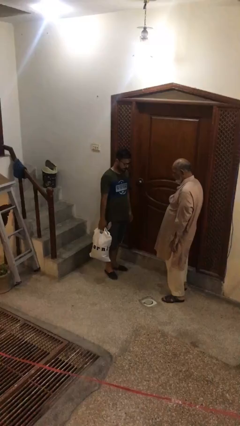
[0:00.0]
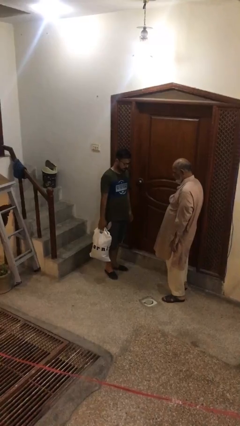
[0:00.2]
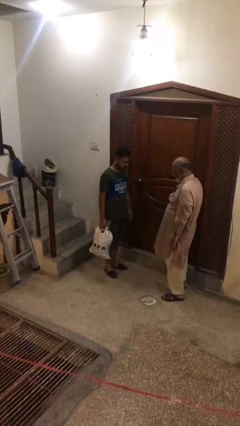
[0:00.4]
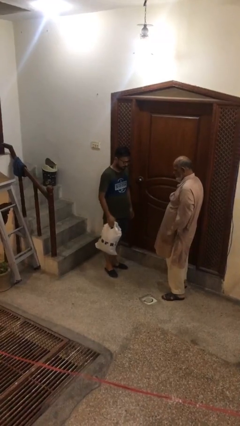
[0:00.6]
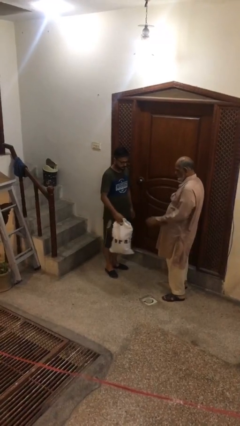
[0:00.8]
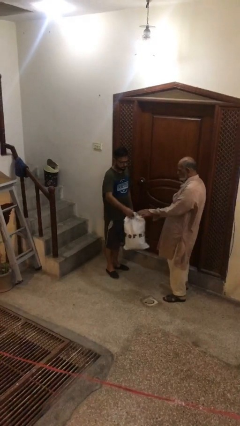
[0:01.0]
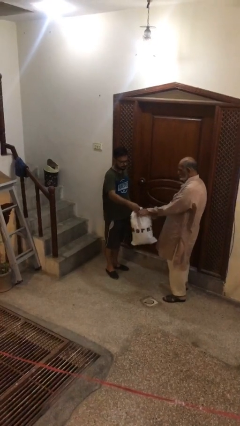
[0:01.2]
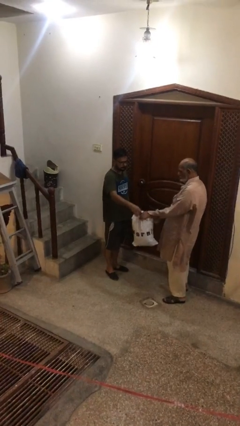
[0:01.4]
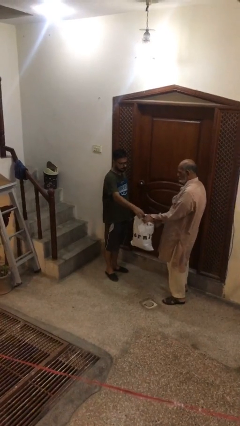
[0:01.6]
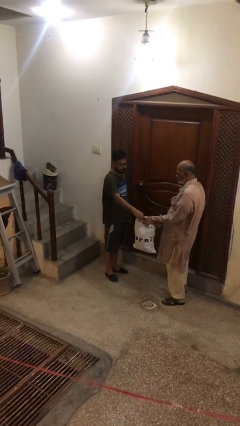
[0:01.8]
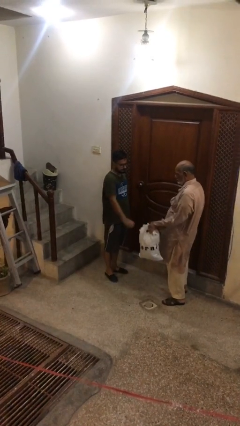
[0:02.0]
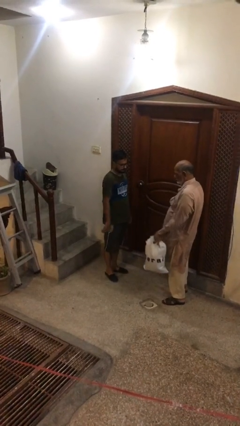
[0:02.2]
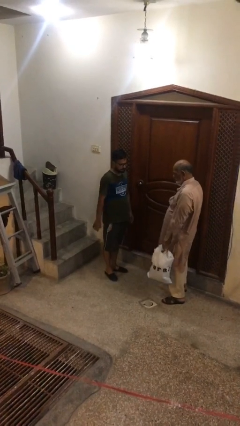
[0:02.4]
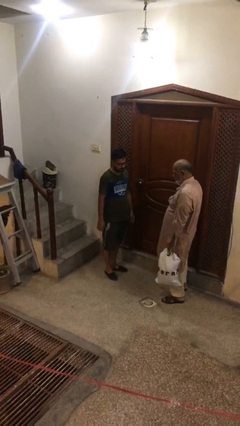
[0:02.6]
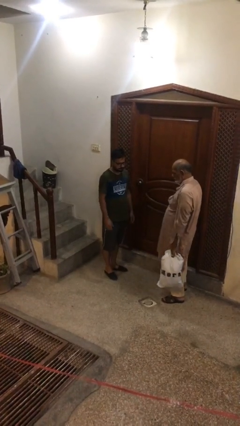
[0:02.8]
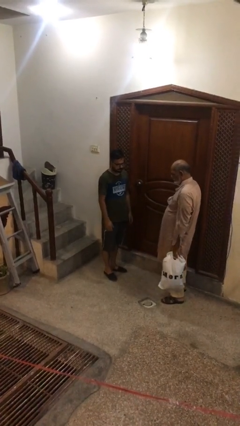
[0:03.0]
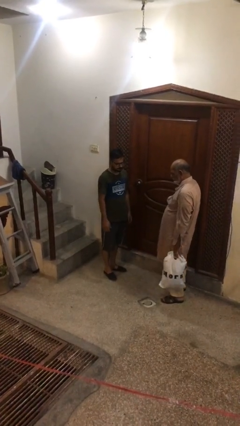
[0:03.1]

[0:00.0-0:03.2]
person transfers object to person

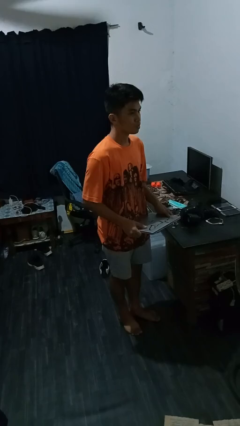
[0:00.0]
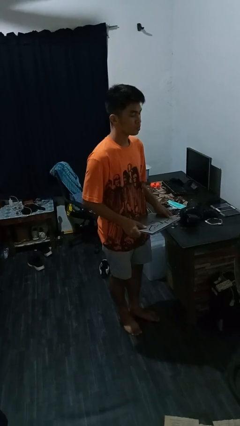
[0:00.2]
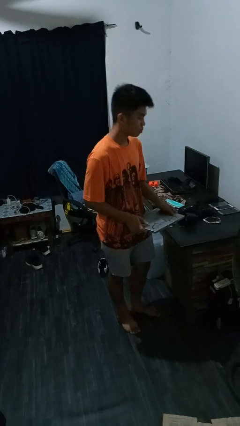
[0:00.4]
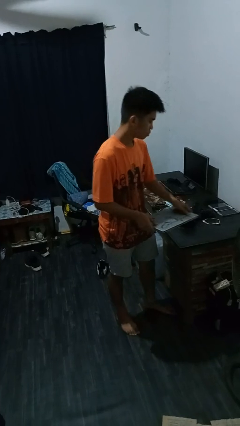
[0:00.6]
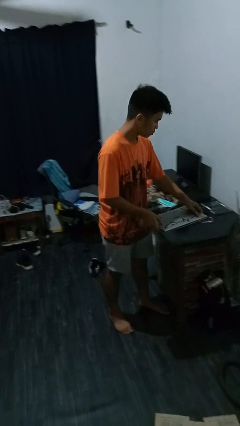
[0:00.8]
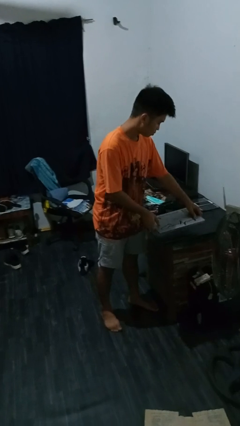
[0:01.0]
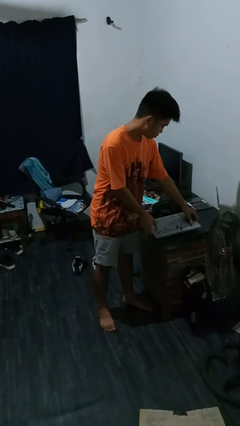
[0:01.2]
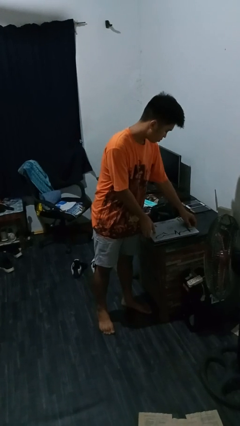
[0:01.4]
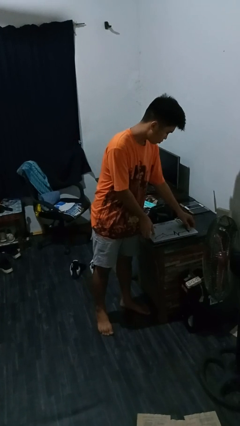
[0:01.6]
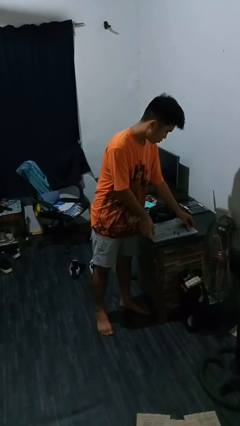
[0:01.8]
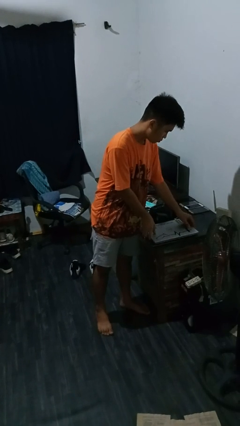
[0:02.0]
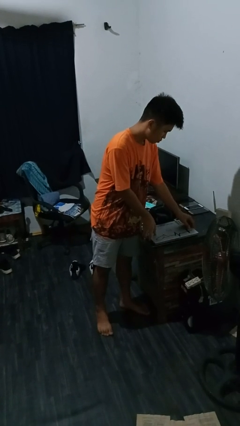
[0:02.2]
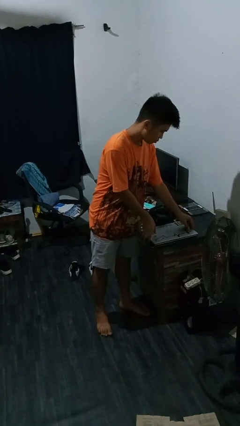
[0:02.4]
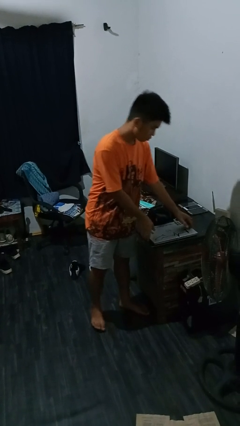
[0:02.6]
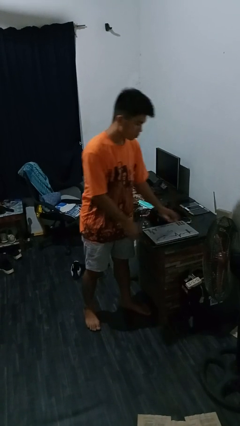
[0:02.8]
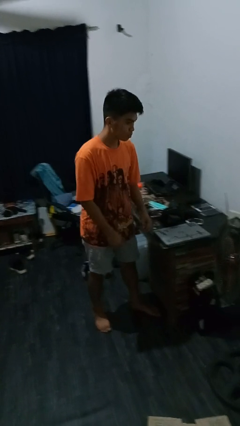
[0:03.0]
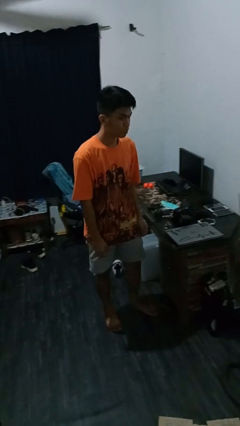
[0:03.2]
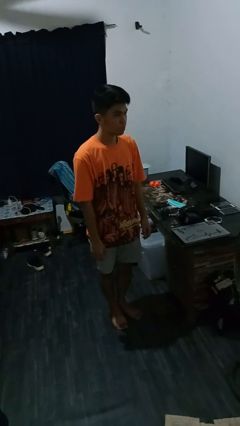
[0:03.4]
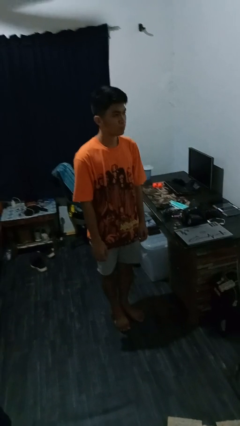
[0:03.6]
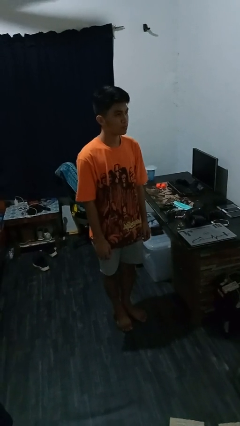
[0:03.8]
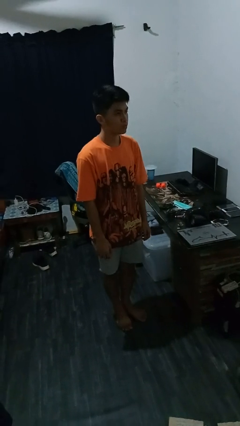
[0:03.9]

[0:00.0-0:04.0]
person puts down object on countertop

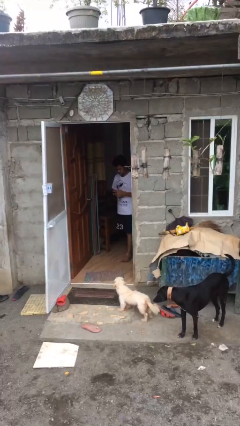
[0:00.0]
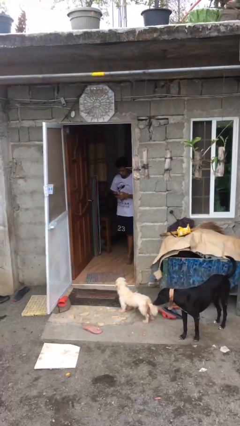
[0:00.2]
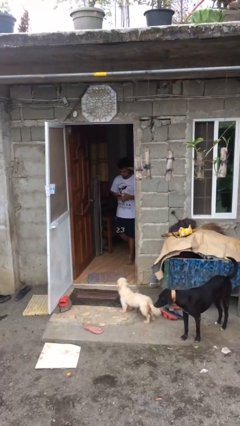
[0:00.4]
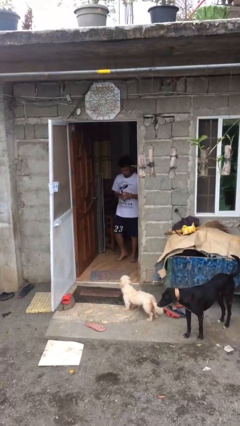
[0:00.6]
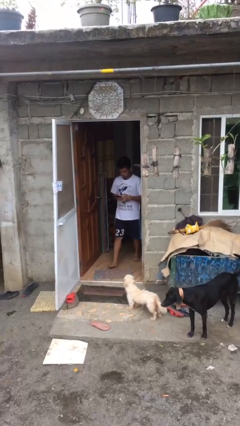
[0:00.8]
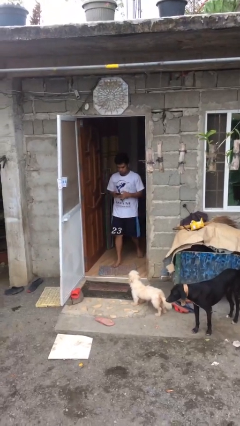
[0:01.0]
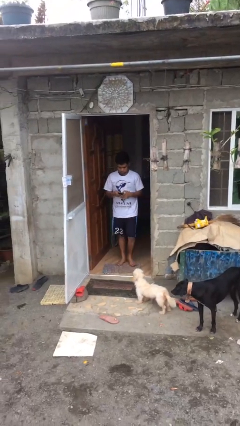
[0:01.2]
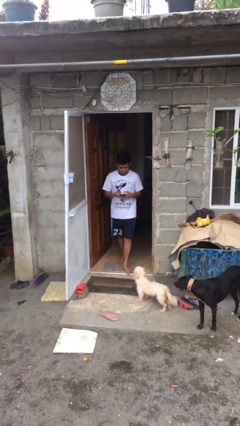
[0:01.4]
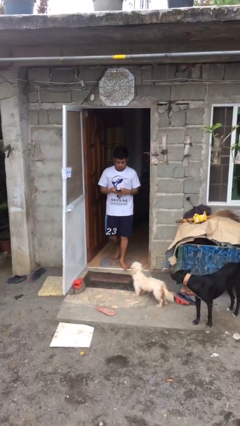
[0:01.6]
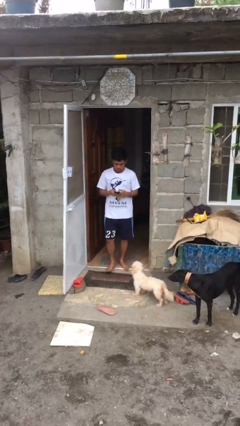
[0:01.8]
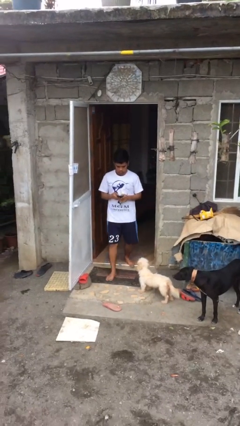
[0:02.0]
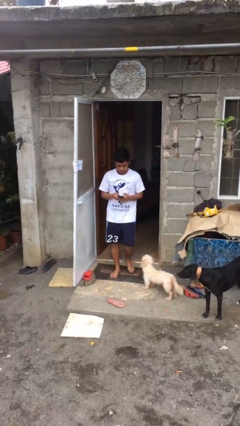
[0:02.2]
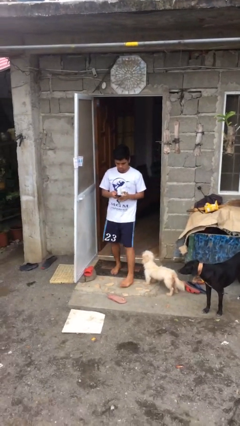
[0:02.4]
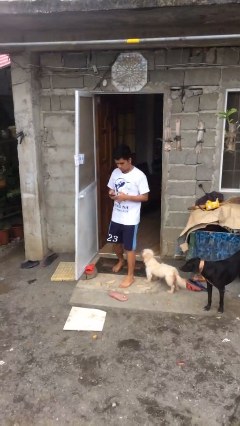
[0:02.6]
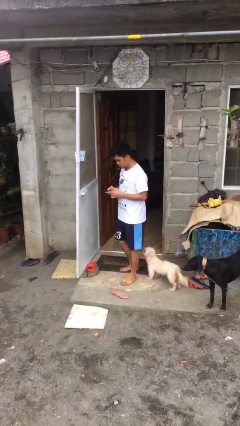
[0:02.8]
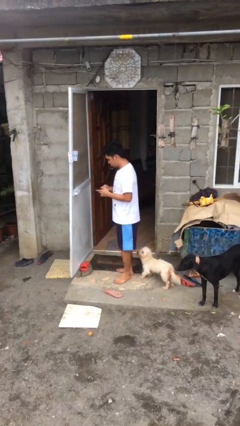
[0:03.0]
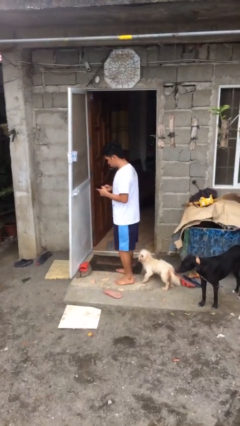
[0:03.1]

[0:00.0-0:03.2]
person enters scene through structure

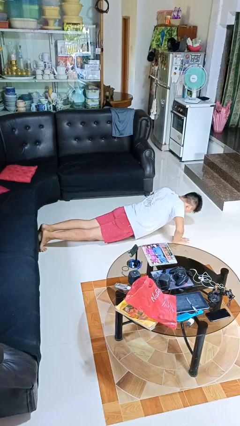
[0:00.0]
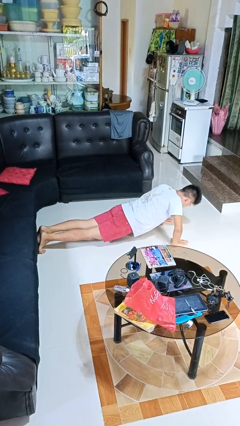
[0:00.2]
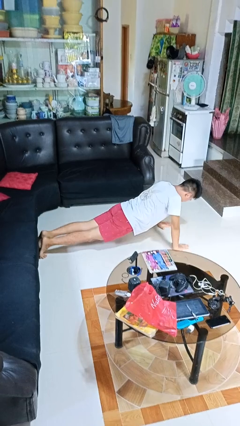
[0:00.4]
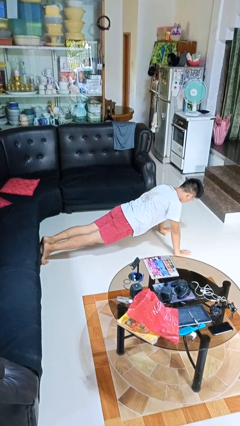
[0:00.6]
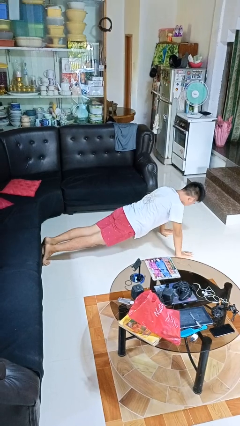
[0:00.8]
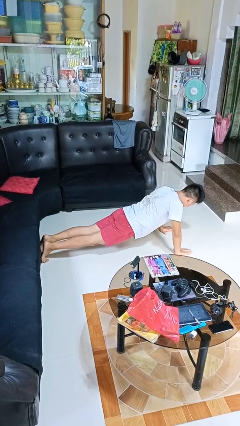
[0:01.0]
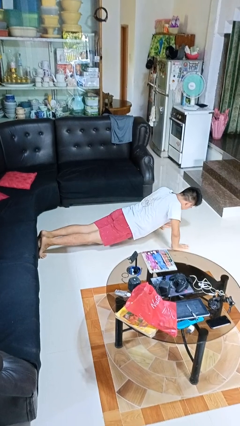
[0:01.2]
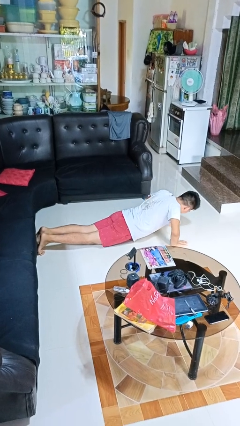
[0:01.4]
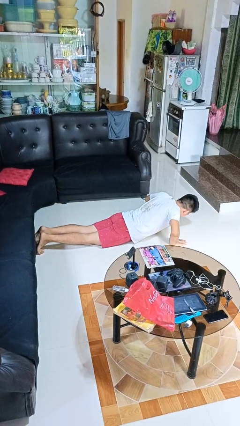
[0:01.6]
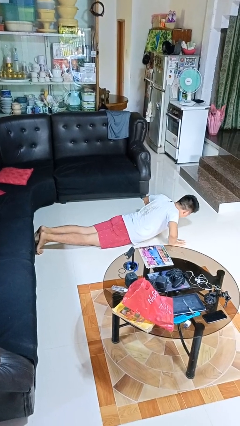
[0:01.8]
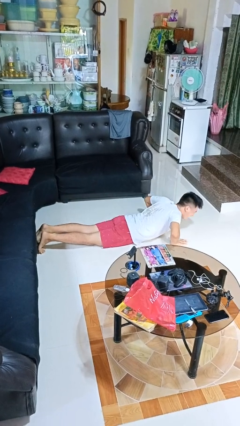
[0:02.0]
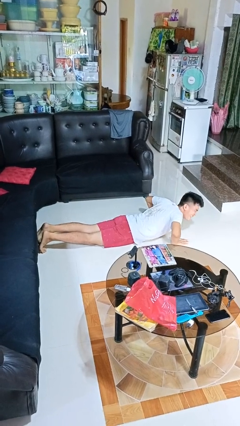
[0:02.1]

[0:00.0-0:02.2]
person exercises with pushup

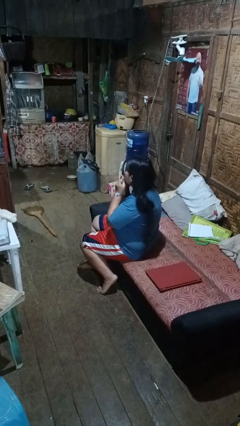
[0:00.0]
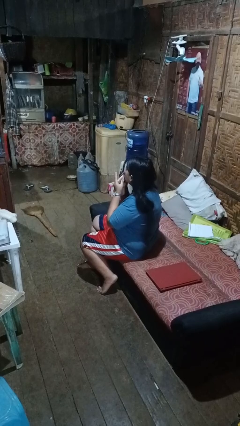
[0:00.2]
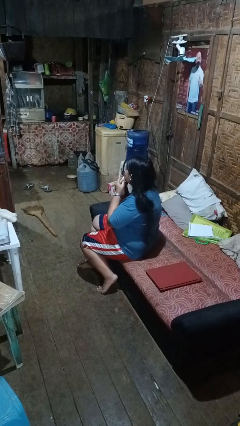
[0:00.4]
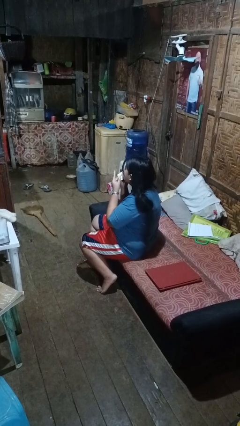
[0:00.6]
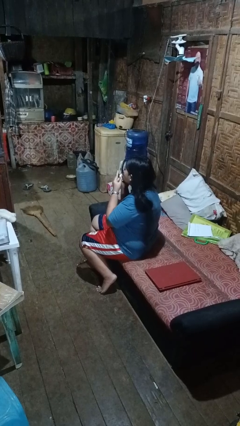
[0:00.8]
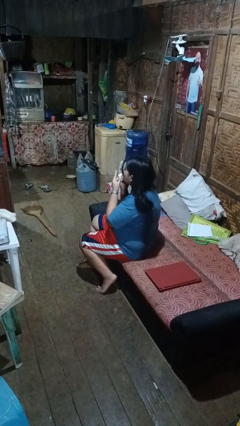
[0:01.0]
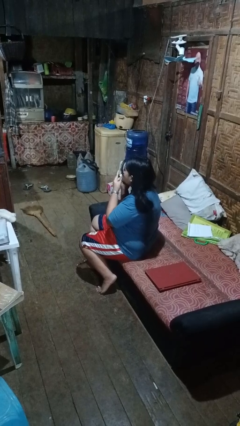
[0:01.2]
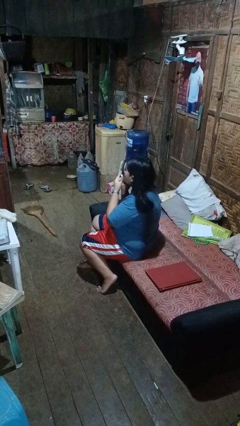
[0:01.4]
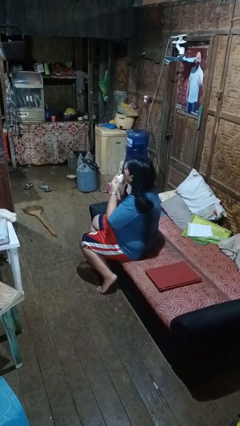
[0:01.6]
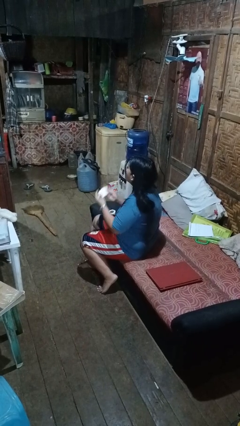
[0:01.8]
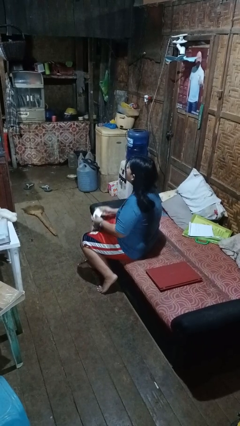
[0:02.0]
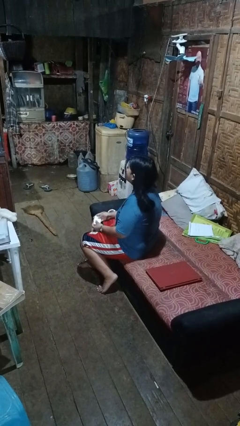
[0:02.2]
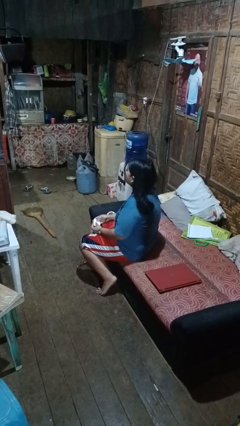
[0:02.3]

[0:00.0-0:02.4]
person wipes mouth with napkin

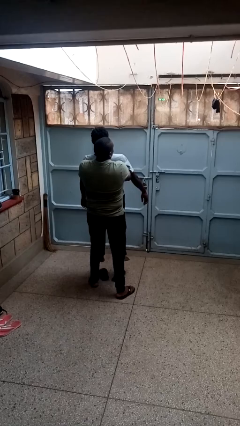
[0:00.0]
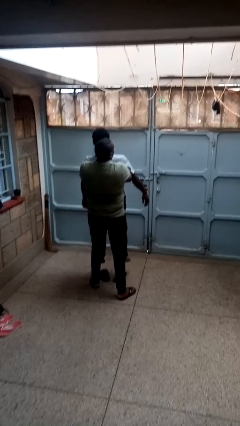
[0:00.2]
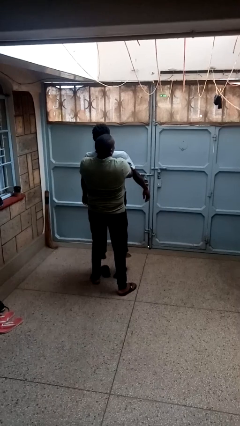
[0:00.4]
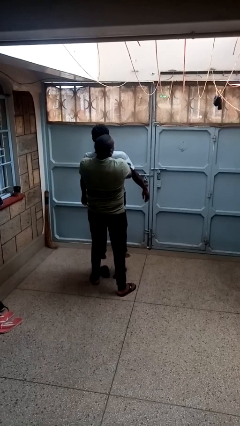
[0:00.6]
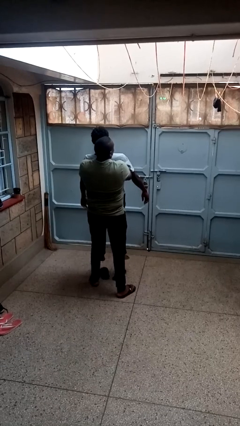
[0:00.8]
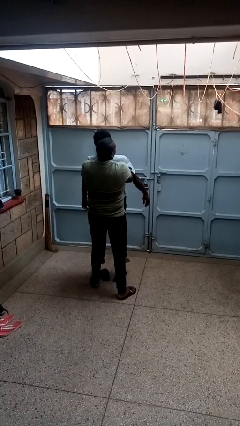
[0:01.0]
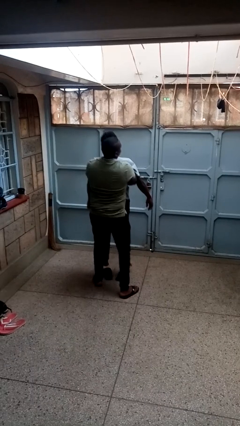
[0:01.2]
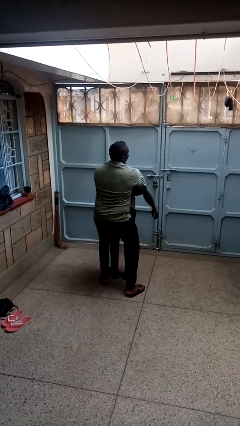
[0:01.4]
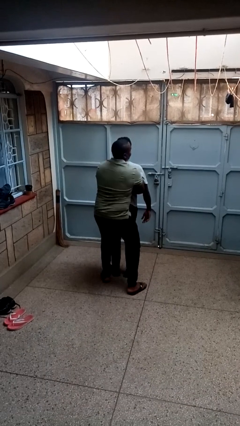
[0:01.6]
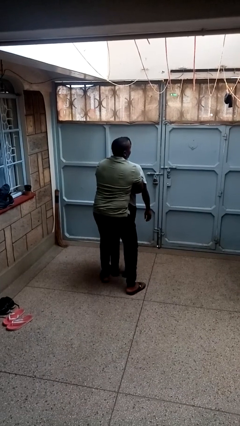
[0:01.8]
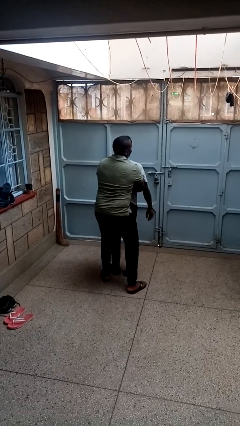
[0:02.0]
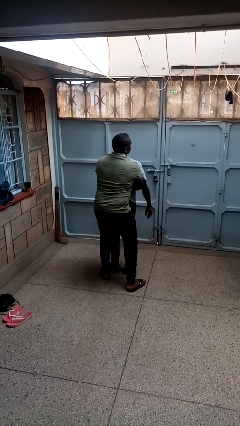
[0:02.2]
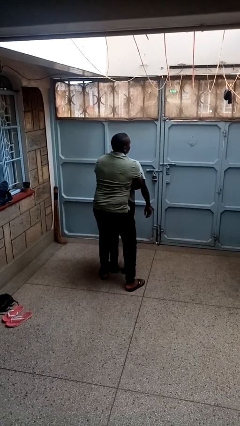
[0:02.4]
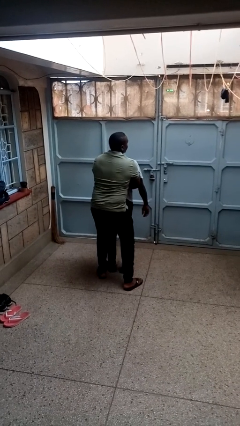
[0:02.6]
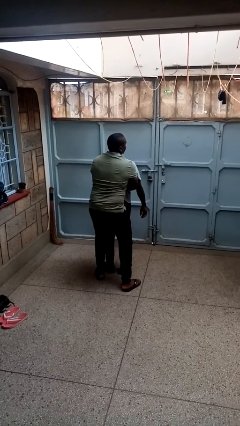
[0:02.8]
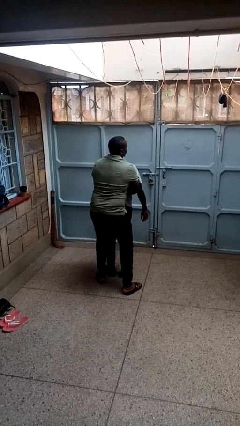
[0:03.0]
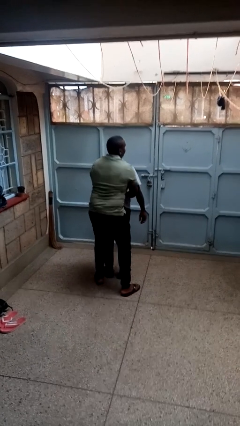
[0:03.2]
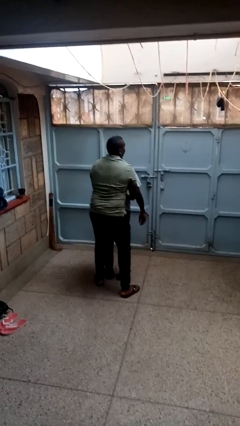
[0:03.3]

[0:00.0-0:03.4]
person puts down person
